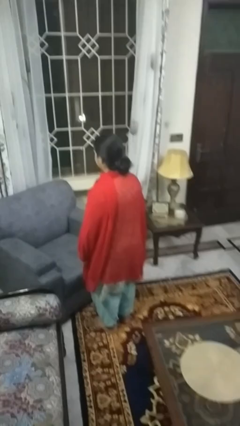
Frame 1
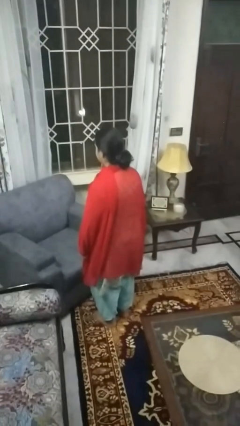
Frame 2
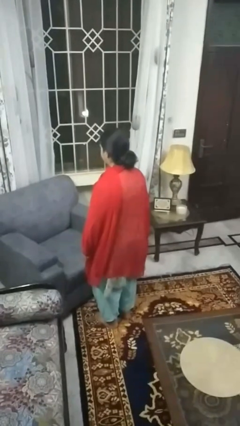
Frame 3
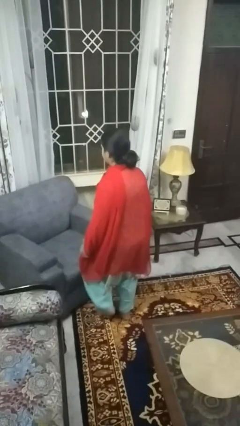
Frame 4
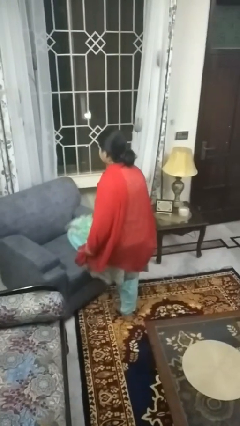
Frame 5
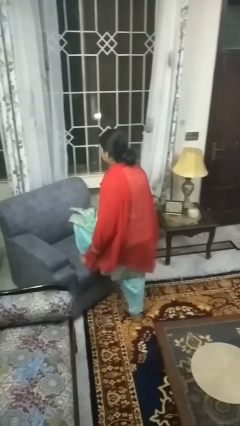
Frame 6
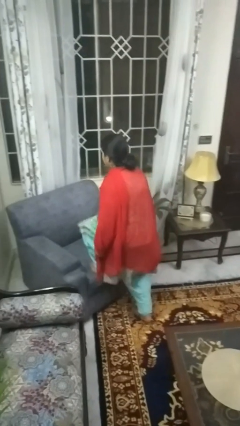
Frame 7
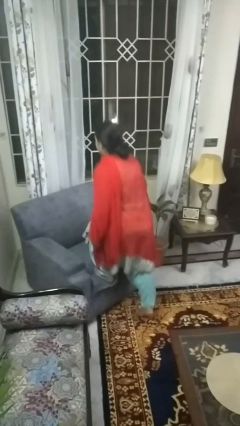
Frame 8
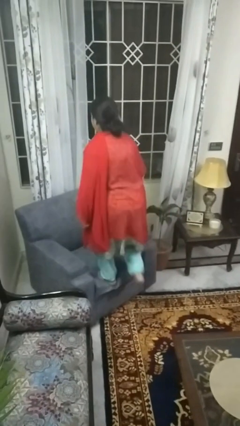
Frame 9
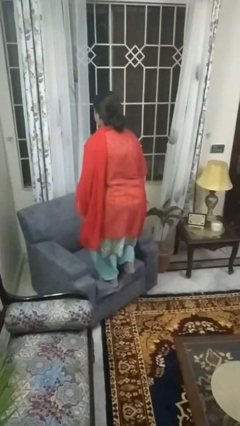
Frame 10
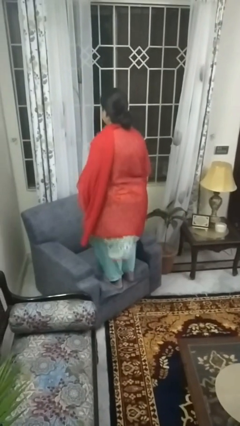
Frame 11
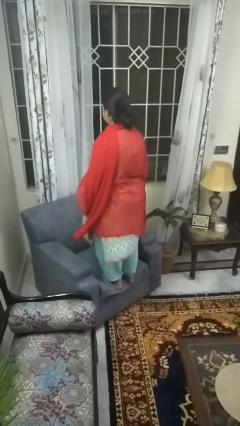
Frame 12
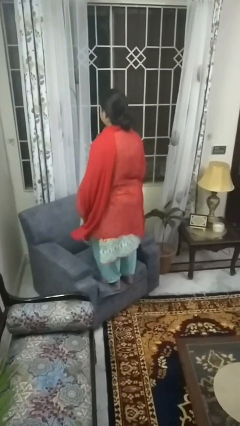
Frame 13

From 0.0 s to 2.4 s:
person climbs on couch

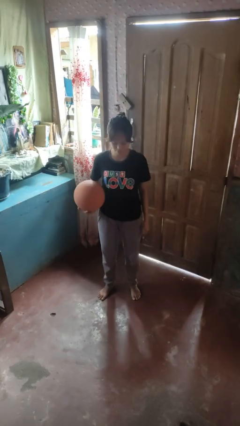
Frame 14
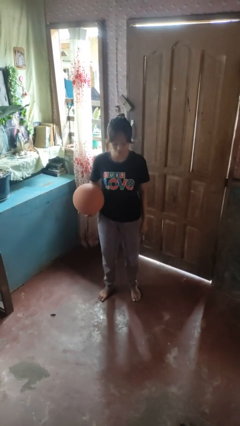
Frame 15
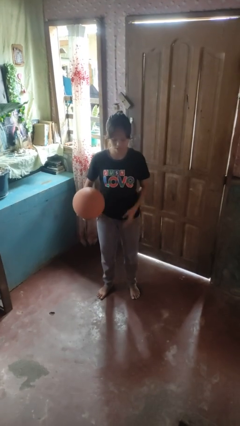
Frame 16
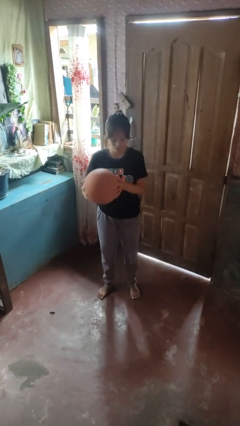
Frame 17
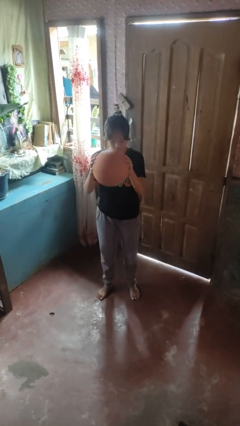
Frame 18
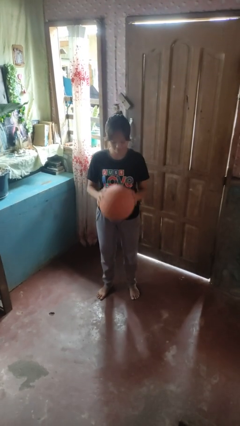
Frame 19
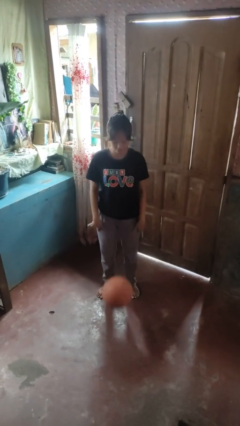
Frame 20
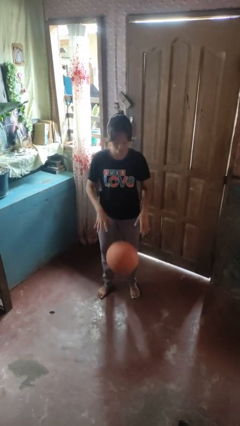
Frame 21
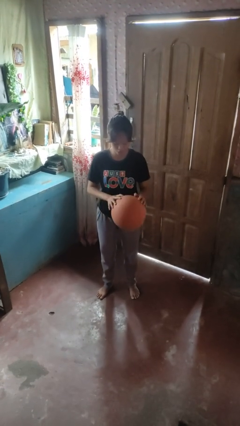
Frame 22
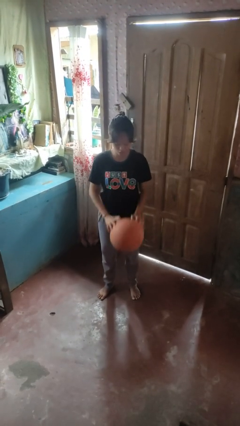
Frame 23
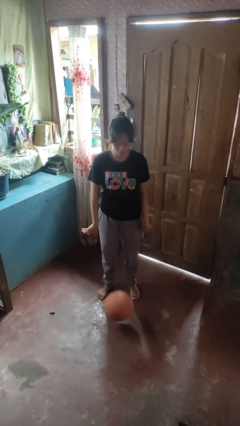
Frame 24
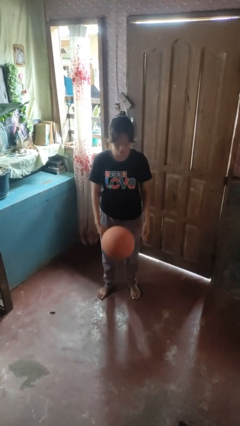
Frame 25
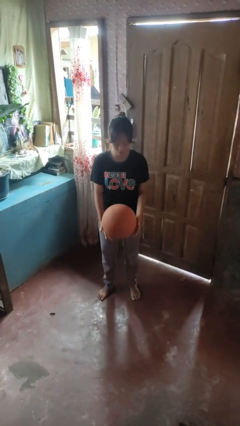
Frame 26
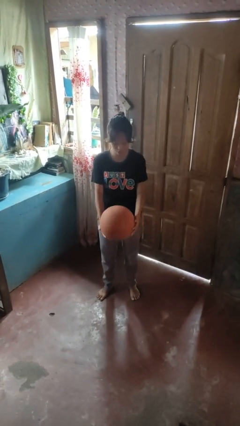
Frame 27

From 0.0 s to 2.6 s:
person bounces ball on floor

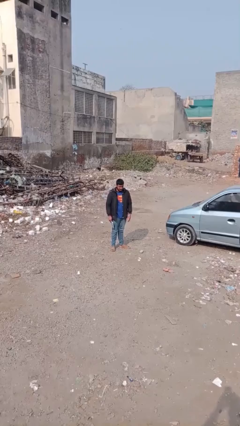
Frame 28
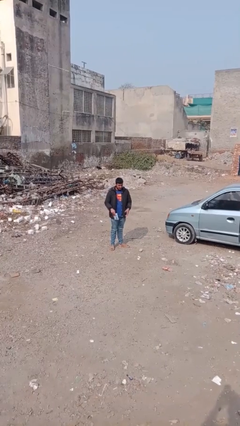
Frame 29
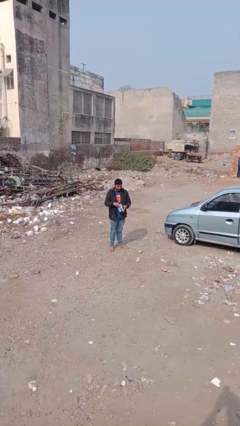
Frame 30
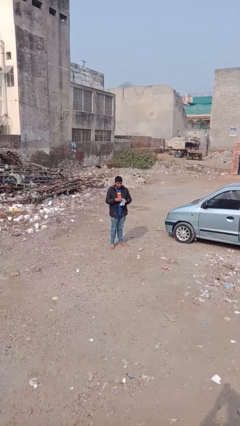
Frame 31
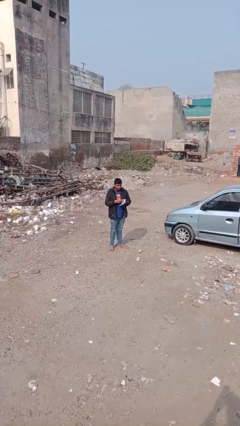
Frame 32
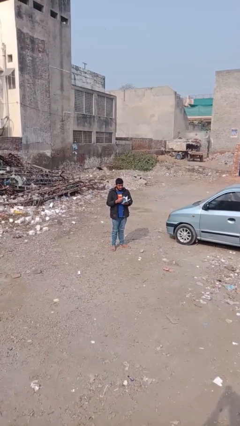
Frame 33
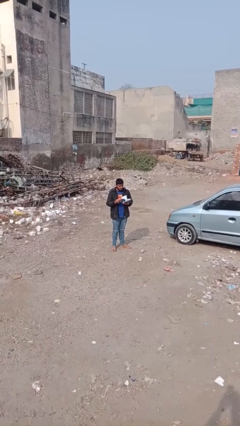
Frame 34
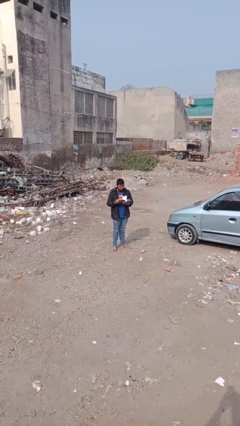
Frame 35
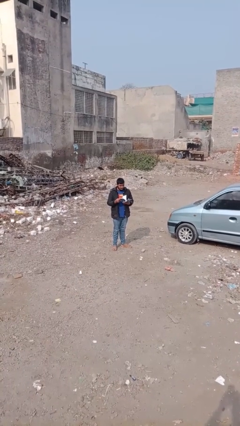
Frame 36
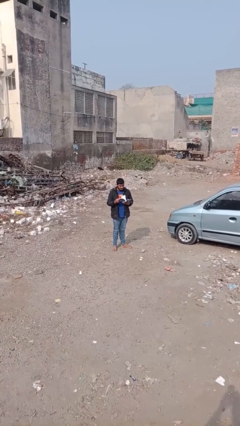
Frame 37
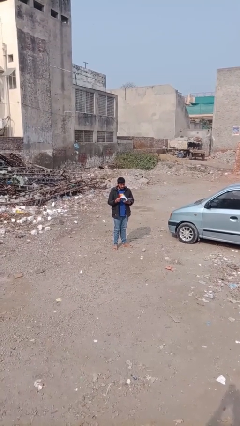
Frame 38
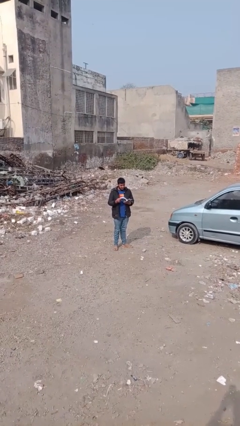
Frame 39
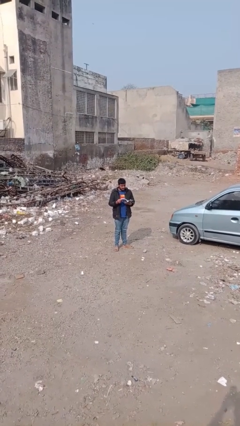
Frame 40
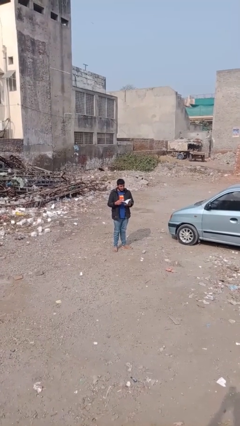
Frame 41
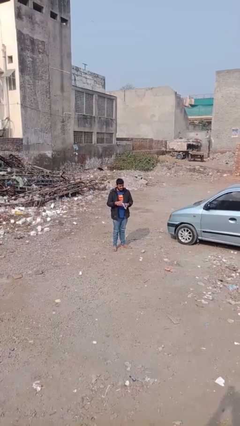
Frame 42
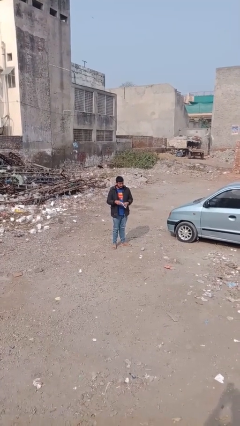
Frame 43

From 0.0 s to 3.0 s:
person reads document

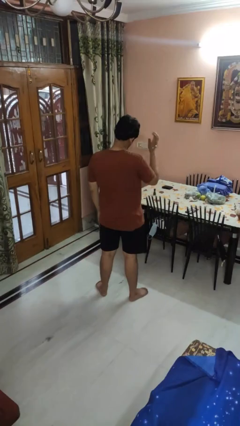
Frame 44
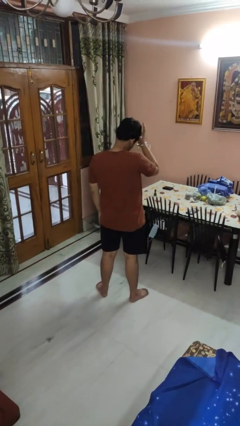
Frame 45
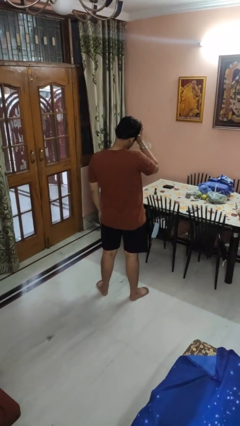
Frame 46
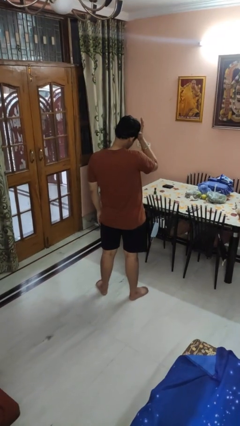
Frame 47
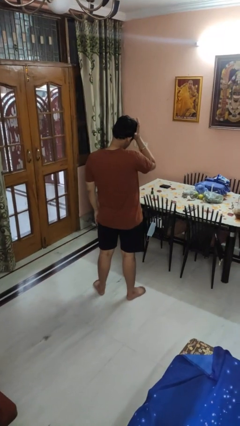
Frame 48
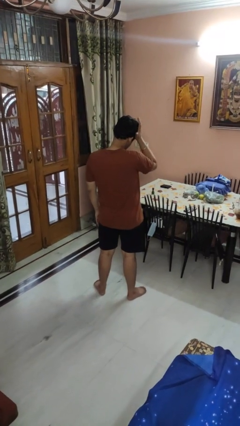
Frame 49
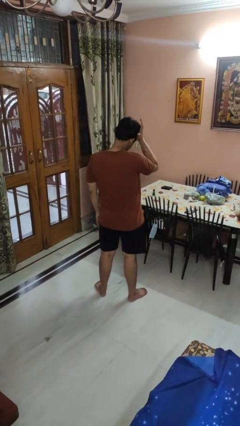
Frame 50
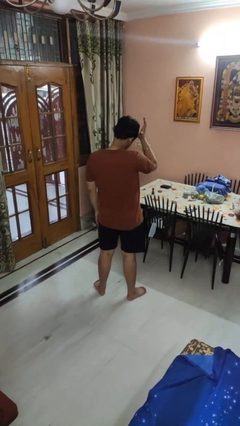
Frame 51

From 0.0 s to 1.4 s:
person pats head

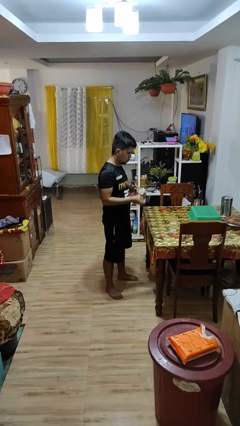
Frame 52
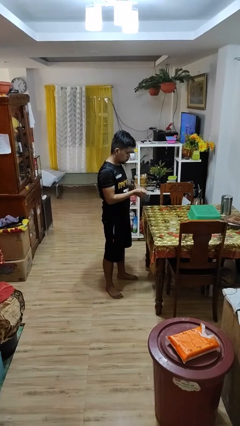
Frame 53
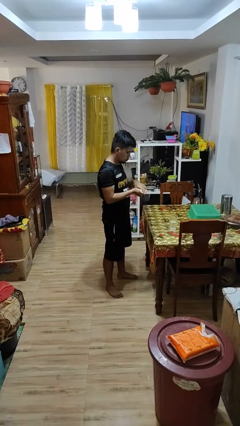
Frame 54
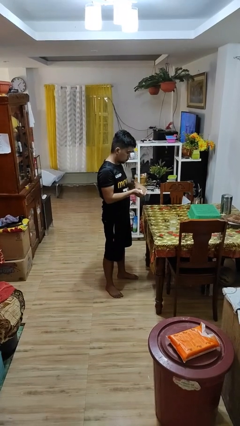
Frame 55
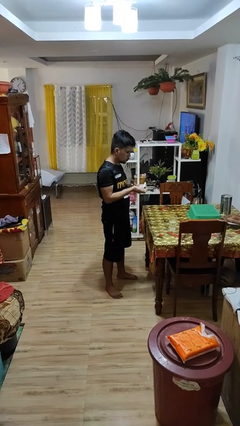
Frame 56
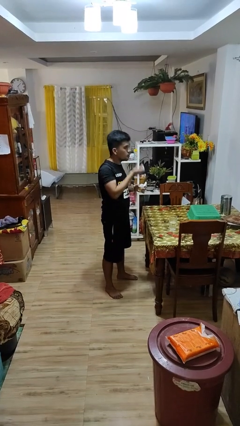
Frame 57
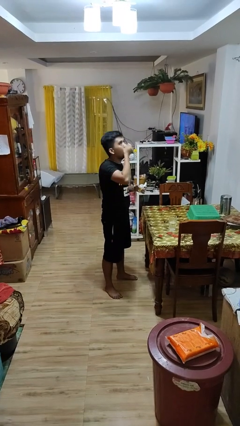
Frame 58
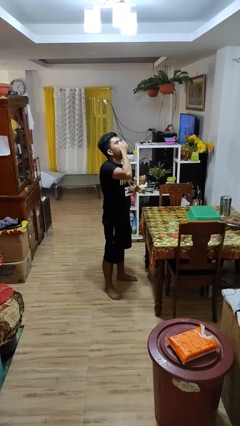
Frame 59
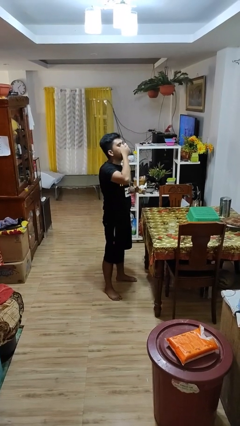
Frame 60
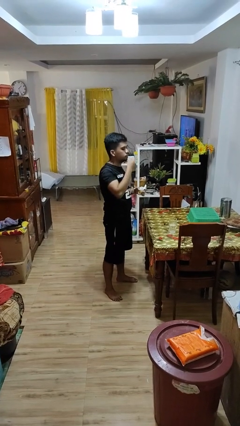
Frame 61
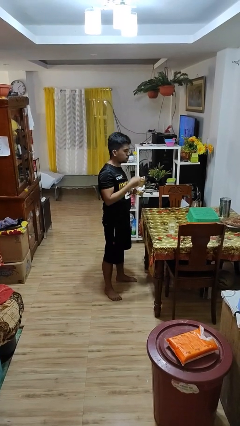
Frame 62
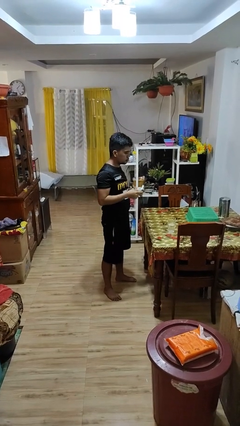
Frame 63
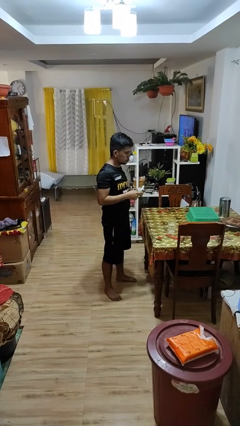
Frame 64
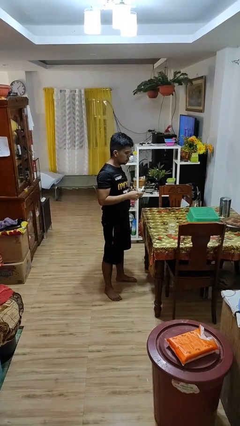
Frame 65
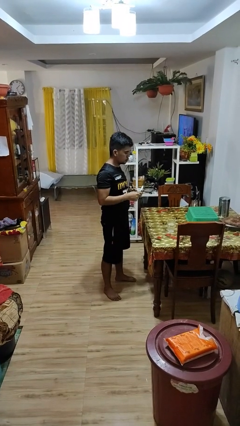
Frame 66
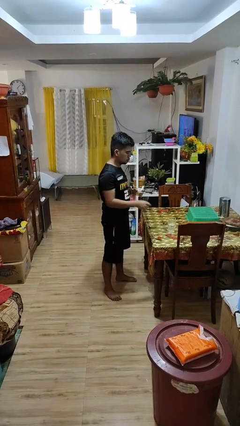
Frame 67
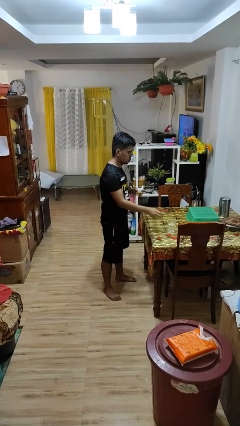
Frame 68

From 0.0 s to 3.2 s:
person takes medicine pills

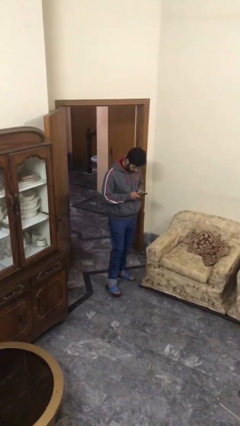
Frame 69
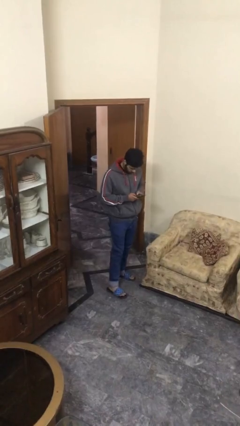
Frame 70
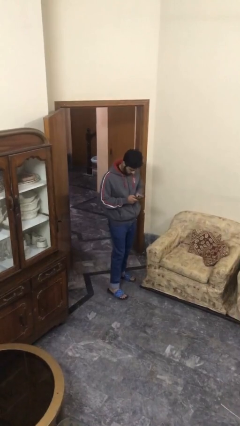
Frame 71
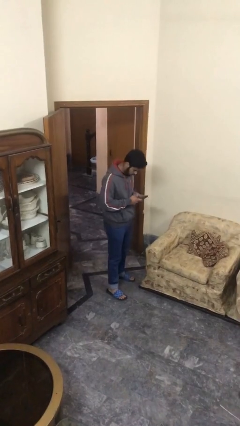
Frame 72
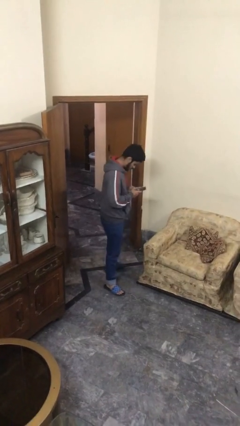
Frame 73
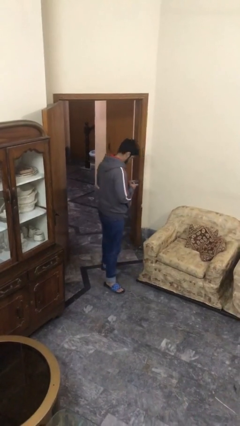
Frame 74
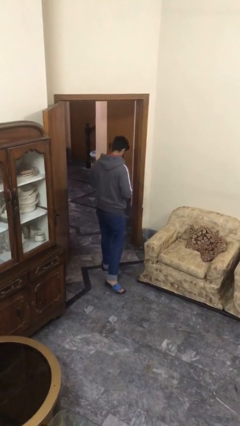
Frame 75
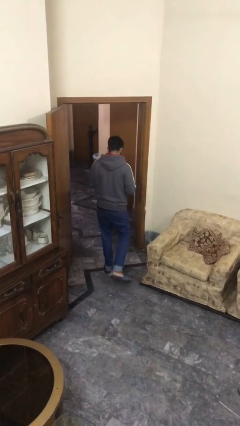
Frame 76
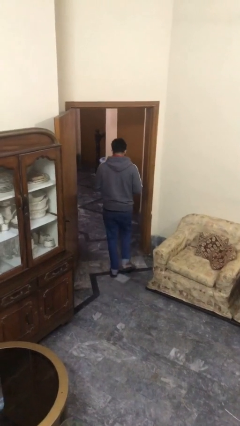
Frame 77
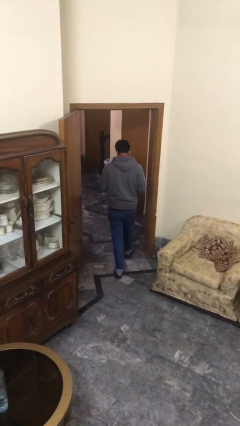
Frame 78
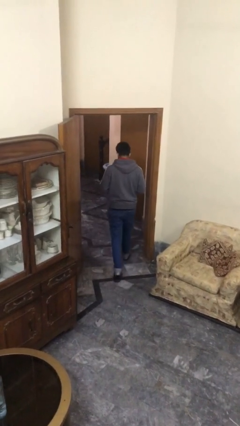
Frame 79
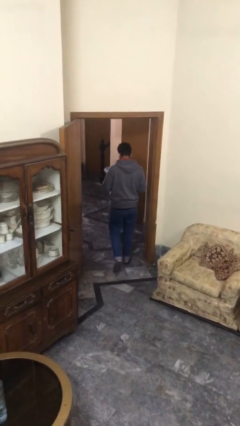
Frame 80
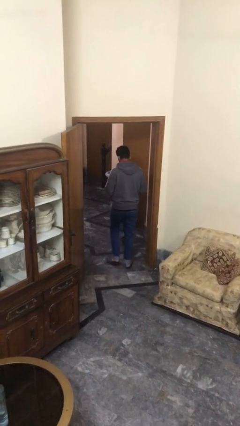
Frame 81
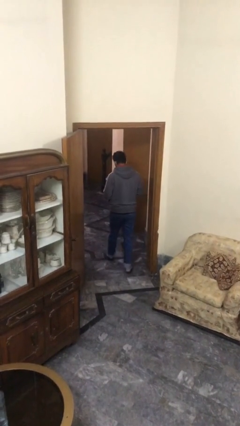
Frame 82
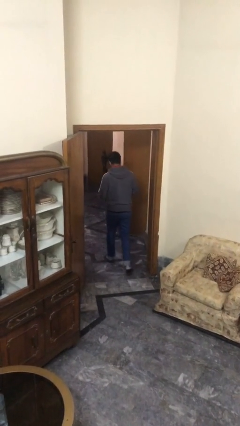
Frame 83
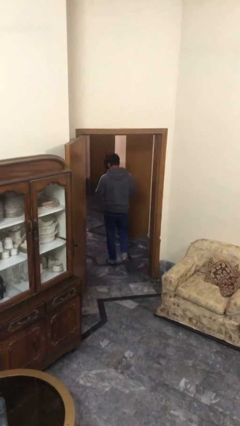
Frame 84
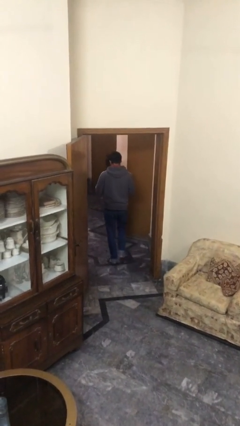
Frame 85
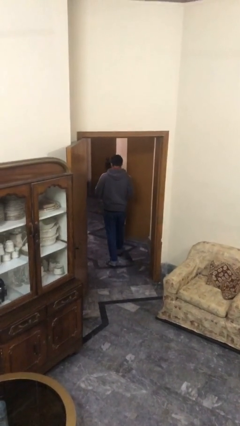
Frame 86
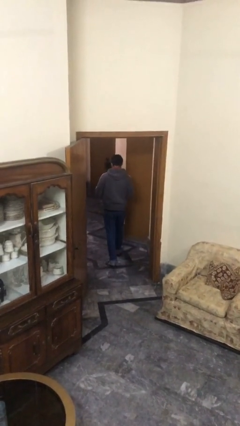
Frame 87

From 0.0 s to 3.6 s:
person exits scene through structure

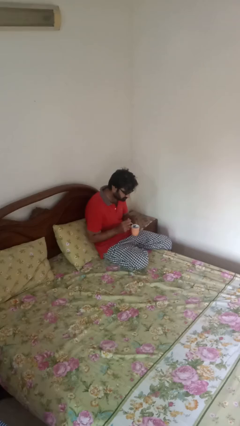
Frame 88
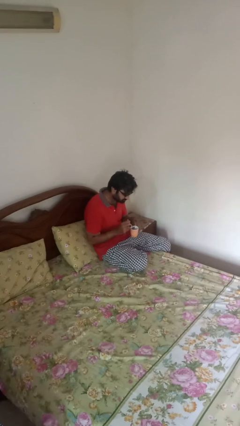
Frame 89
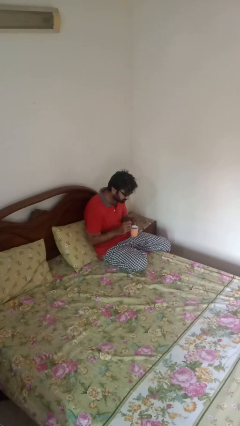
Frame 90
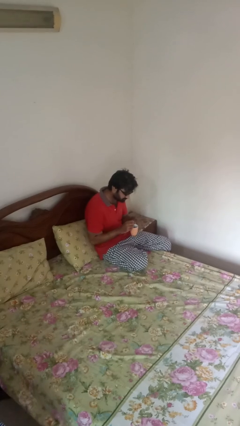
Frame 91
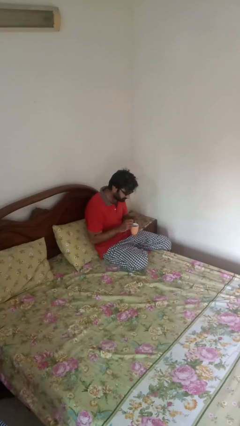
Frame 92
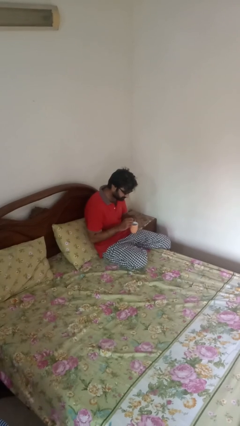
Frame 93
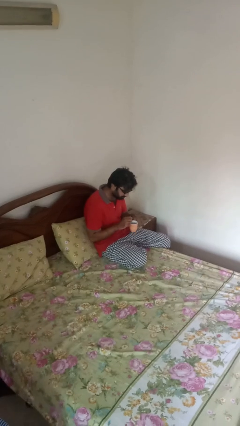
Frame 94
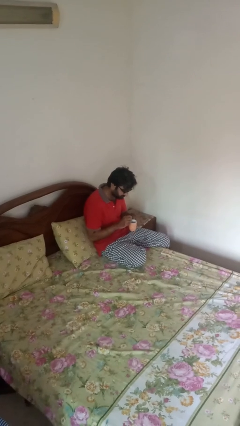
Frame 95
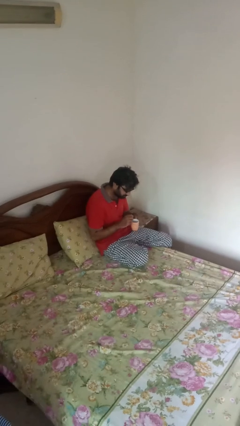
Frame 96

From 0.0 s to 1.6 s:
person stirs mug
